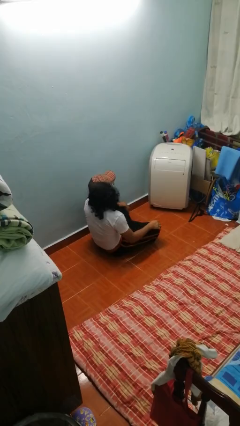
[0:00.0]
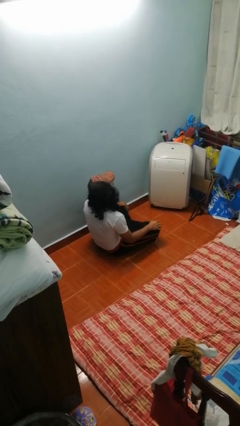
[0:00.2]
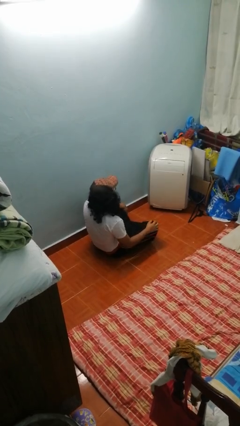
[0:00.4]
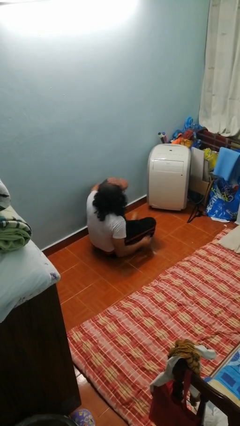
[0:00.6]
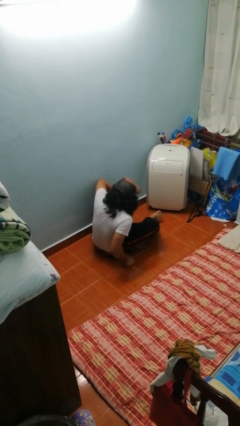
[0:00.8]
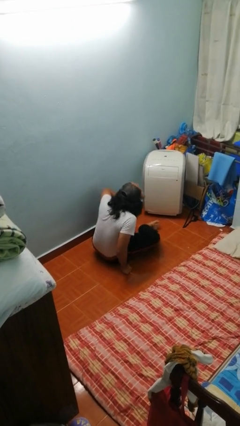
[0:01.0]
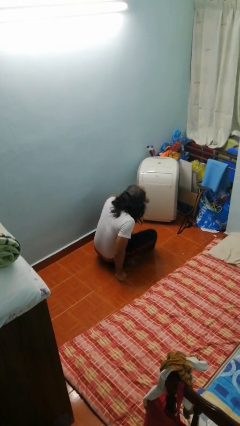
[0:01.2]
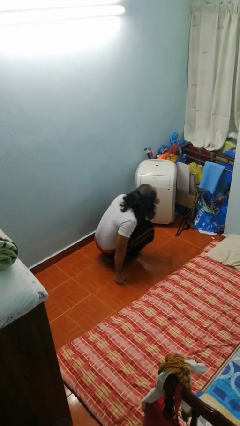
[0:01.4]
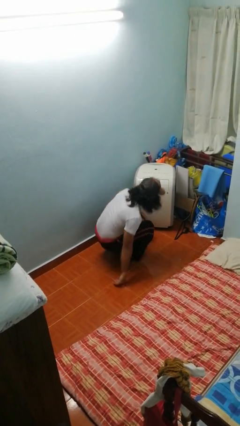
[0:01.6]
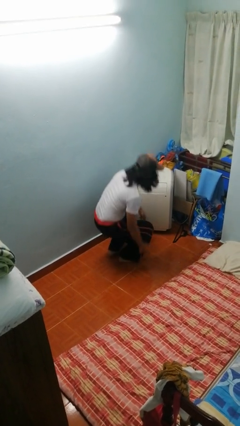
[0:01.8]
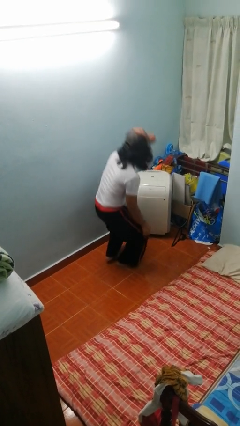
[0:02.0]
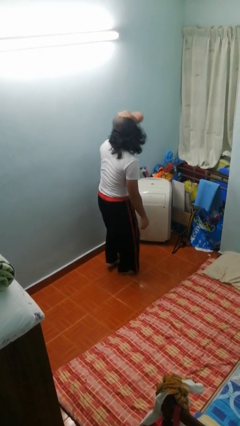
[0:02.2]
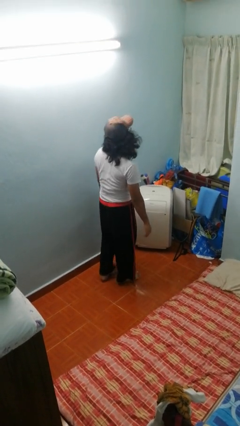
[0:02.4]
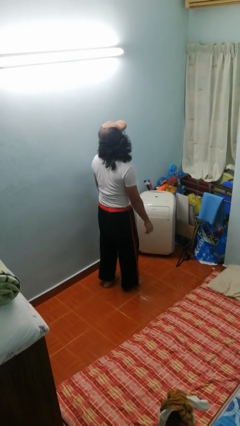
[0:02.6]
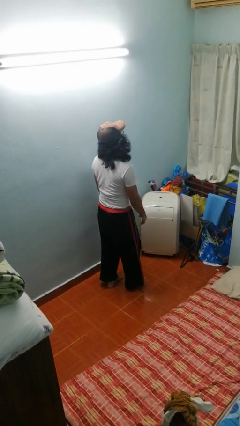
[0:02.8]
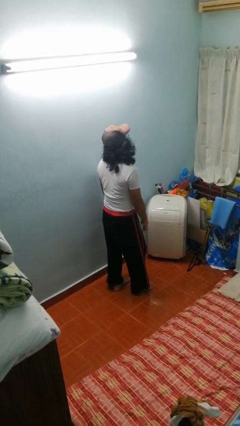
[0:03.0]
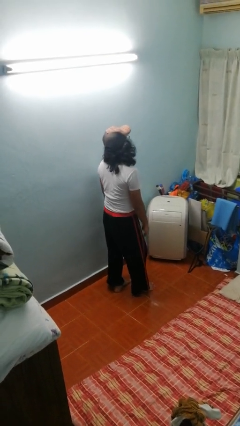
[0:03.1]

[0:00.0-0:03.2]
person stands up from floor

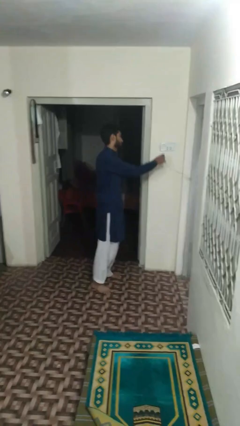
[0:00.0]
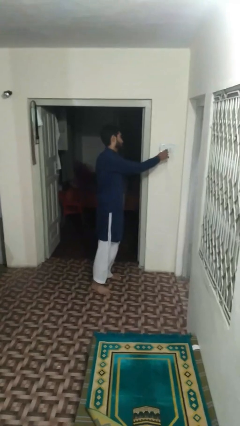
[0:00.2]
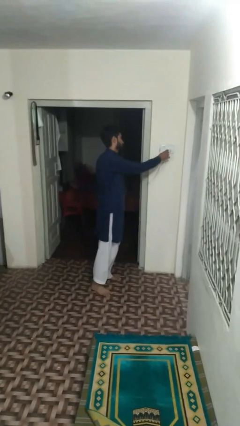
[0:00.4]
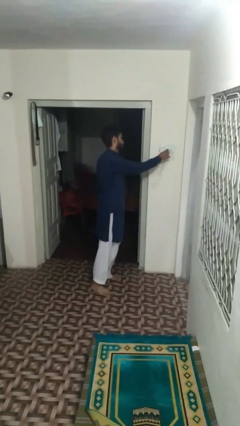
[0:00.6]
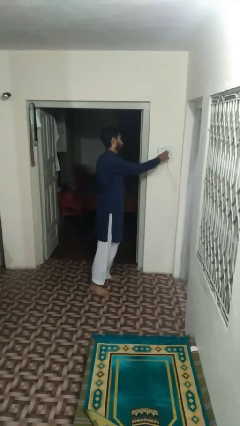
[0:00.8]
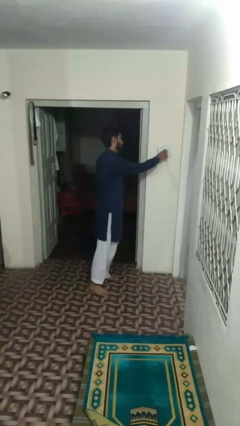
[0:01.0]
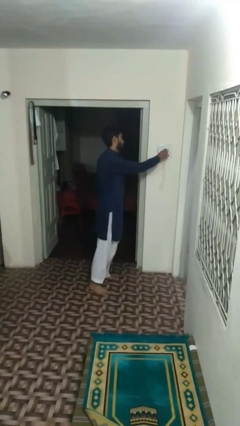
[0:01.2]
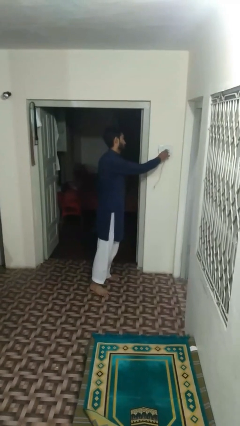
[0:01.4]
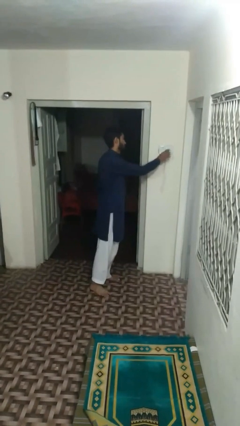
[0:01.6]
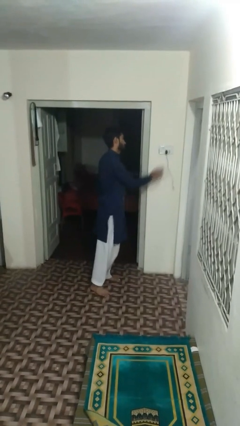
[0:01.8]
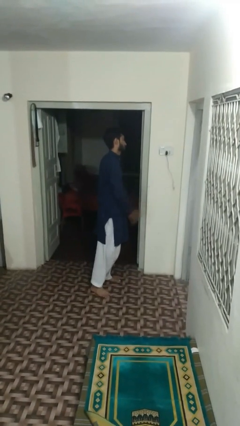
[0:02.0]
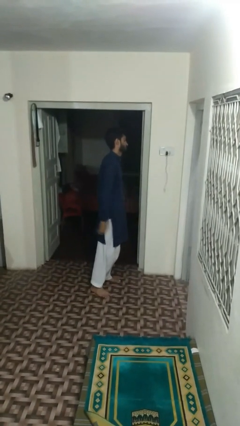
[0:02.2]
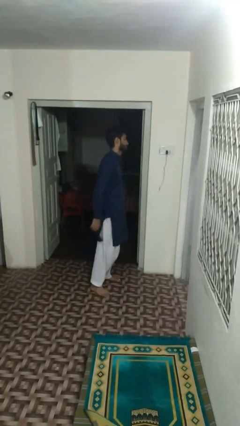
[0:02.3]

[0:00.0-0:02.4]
person plugs into electrical socket

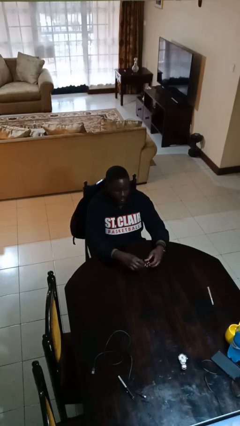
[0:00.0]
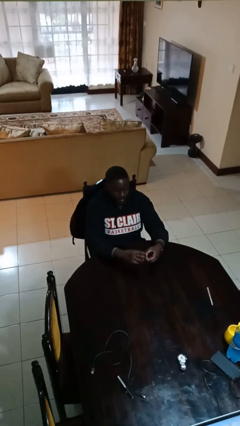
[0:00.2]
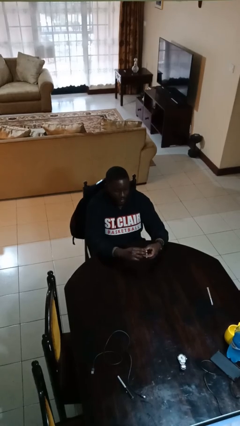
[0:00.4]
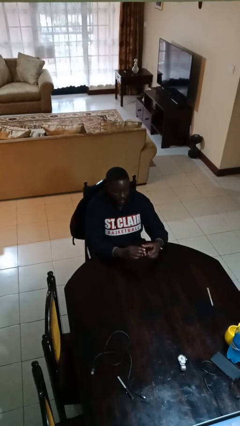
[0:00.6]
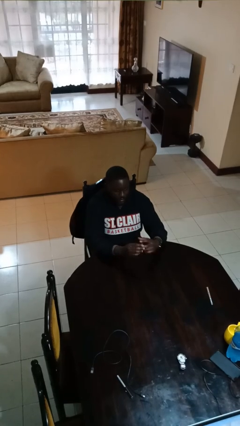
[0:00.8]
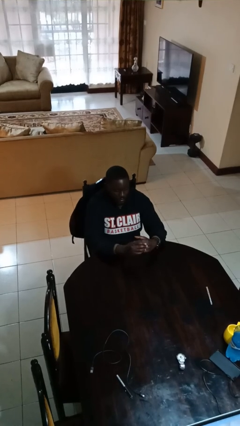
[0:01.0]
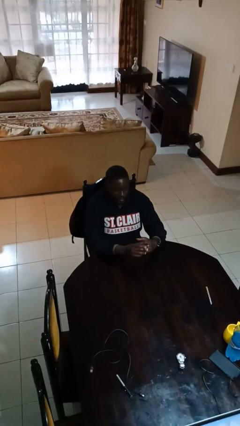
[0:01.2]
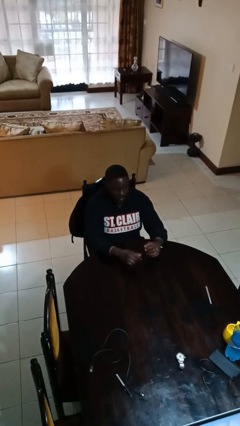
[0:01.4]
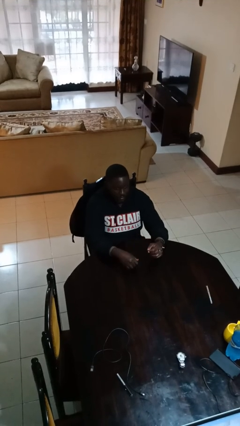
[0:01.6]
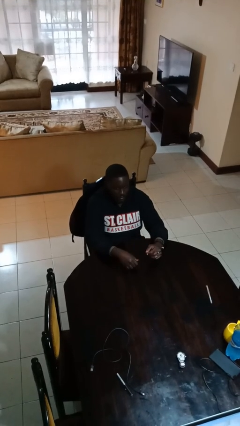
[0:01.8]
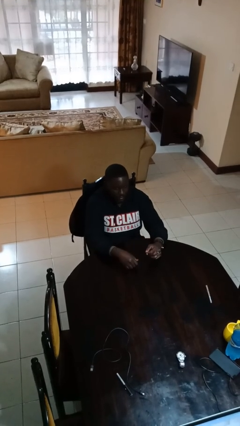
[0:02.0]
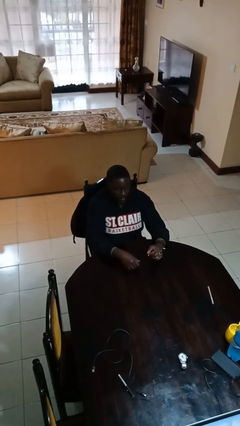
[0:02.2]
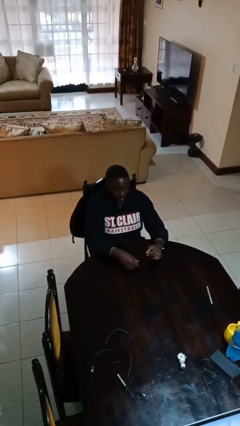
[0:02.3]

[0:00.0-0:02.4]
person puts on ring

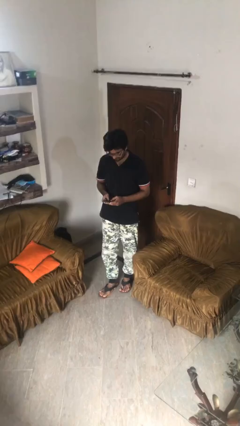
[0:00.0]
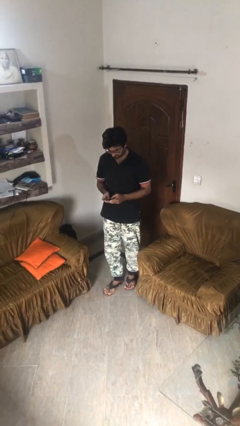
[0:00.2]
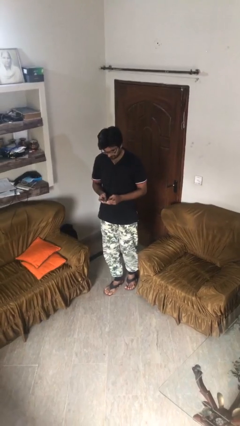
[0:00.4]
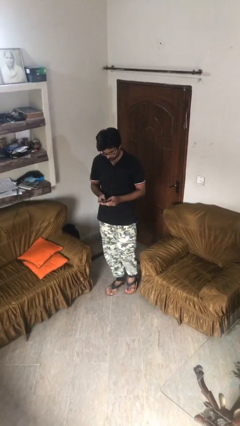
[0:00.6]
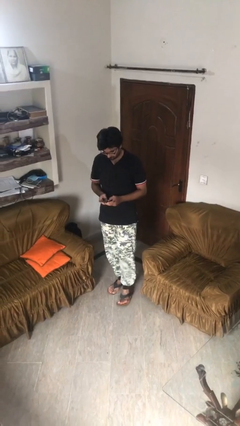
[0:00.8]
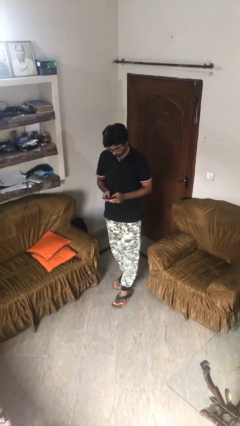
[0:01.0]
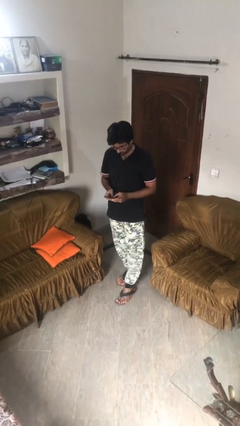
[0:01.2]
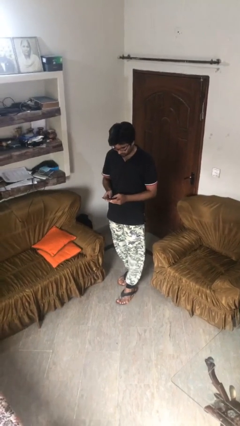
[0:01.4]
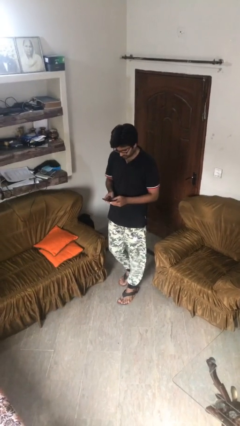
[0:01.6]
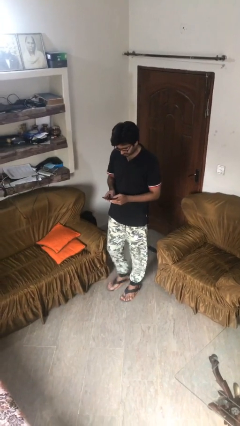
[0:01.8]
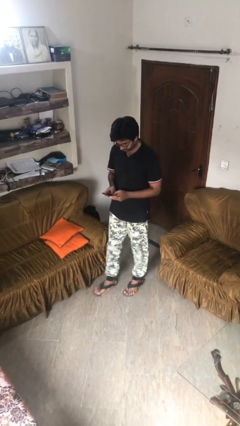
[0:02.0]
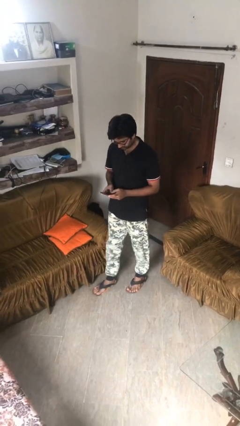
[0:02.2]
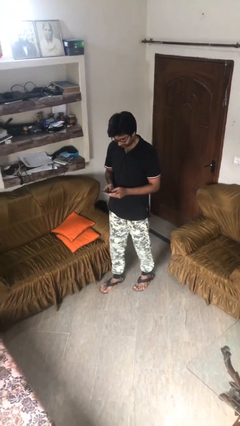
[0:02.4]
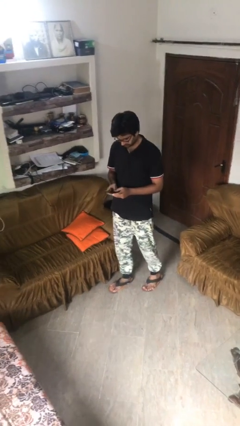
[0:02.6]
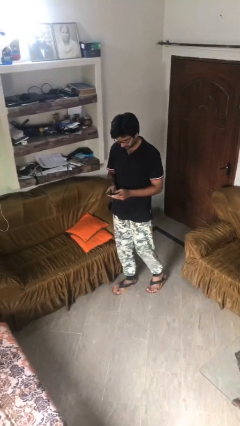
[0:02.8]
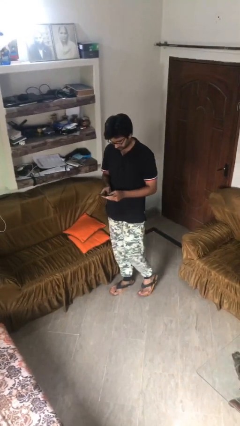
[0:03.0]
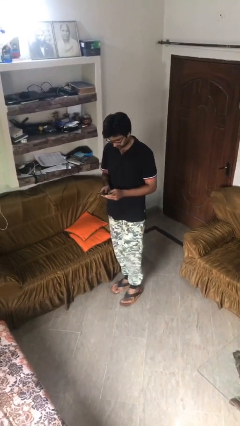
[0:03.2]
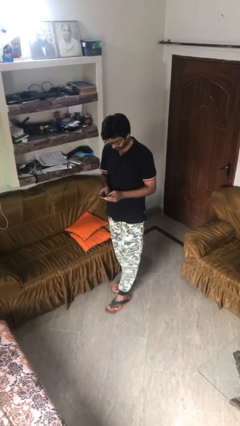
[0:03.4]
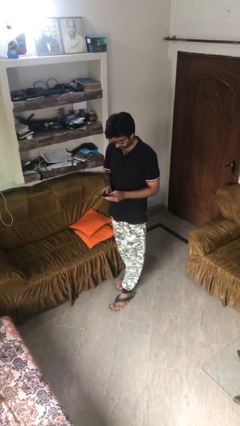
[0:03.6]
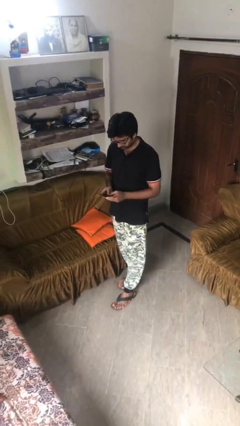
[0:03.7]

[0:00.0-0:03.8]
person texts on phone

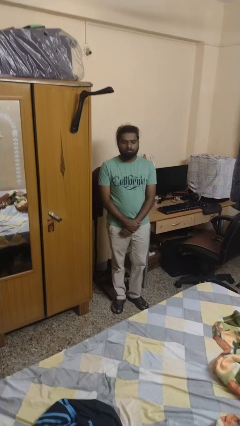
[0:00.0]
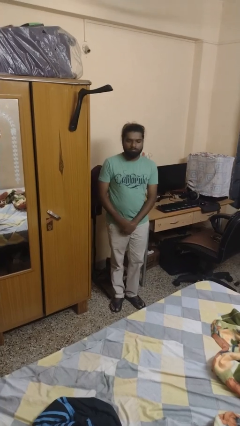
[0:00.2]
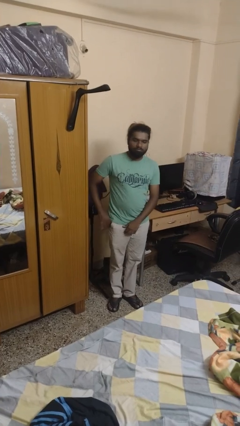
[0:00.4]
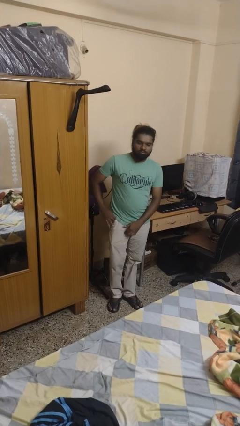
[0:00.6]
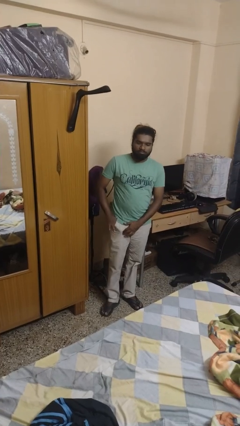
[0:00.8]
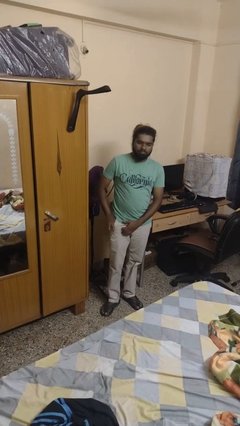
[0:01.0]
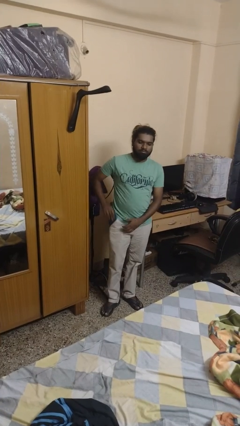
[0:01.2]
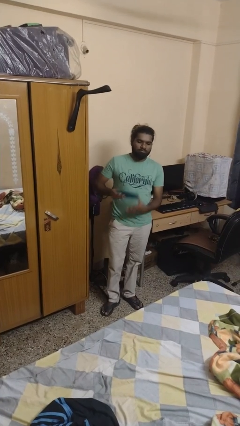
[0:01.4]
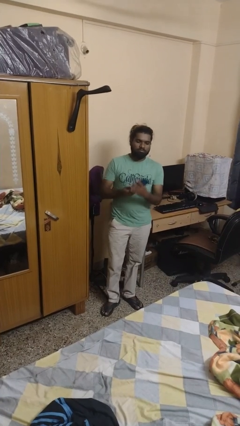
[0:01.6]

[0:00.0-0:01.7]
person takes phone from pocket

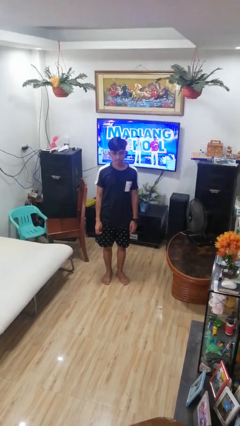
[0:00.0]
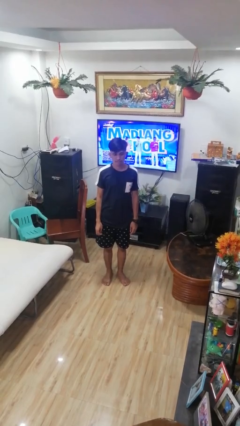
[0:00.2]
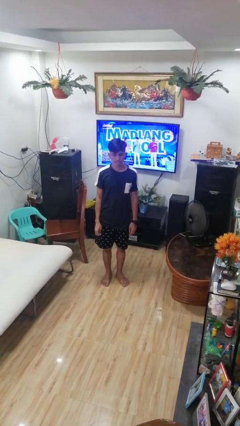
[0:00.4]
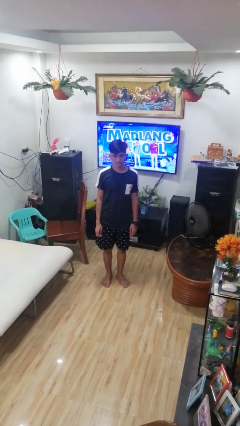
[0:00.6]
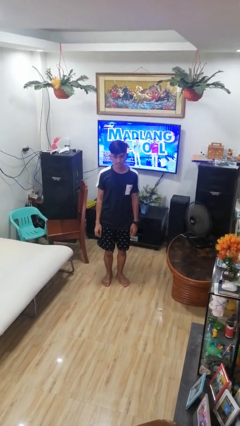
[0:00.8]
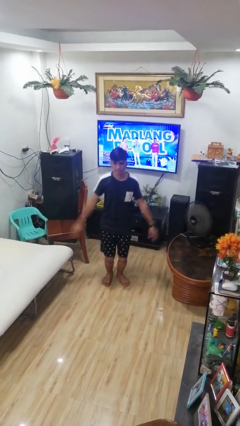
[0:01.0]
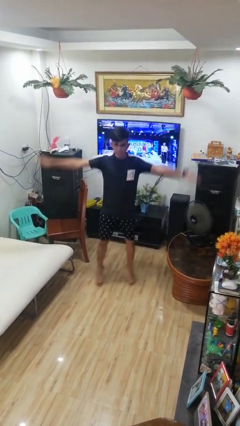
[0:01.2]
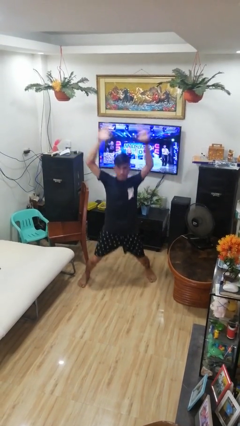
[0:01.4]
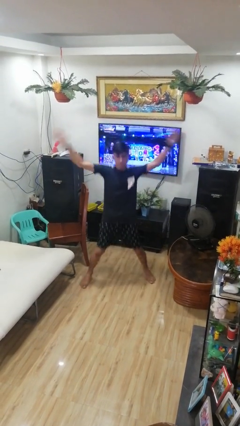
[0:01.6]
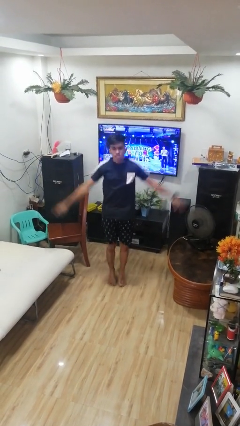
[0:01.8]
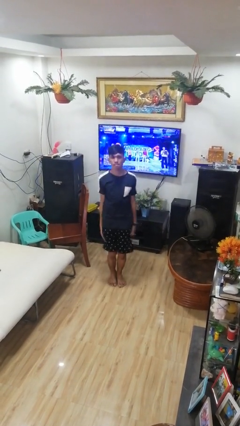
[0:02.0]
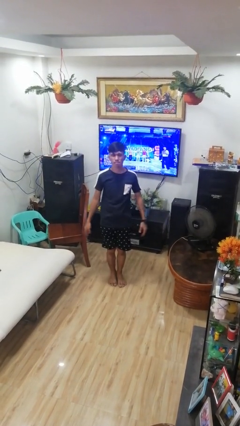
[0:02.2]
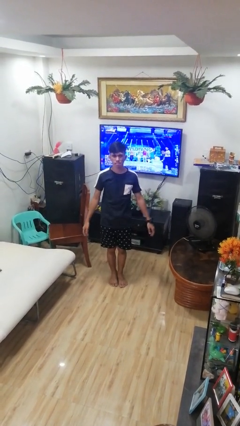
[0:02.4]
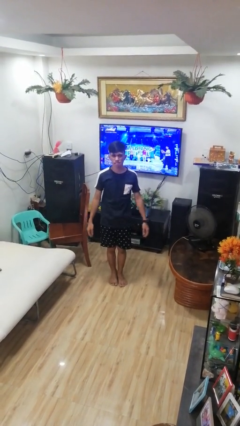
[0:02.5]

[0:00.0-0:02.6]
person exercises with jumping jacks

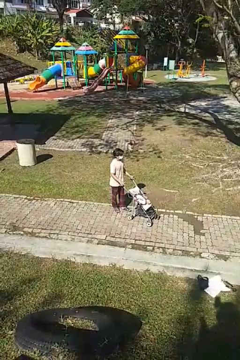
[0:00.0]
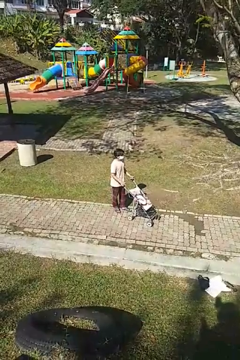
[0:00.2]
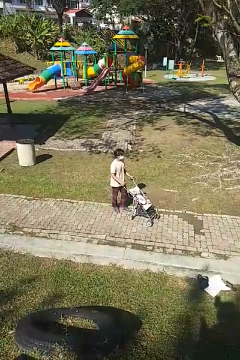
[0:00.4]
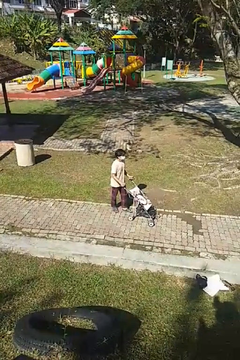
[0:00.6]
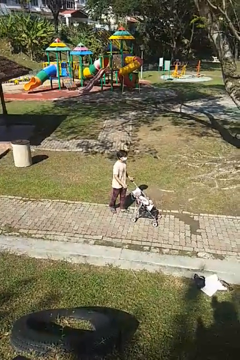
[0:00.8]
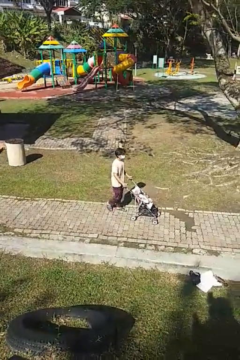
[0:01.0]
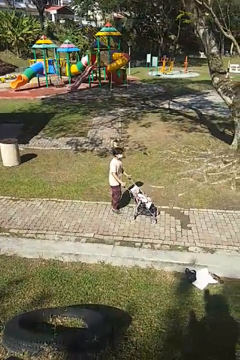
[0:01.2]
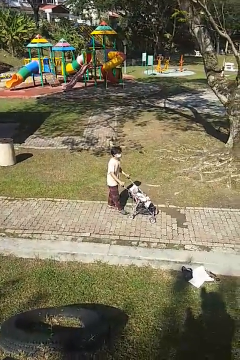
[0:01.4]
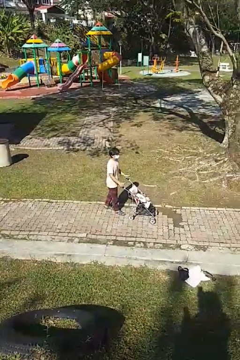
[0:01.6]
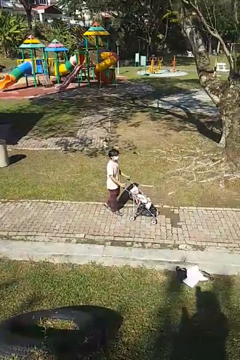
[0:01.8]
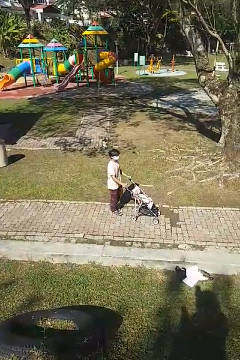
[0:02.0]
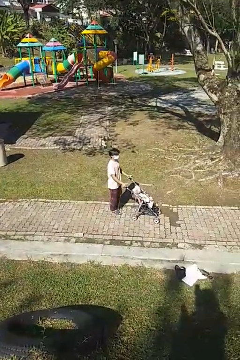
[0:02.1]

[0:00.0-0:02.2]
person pushes wheeled cart
